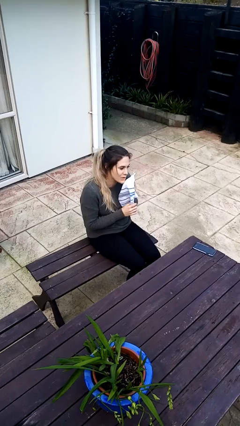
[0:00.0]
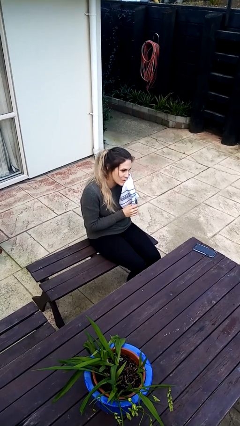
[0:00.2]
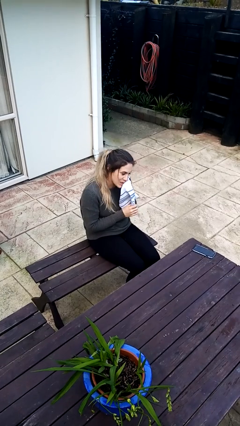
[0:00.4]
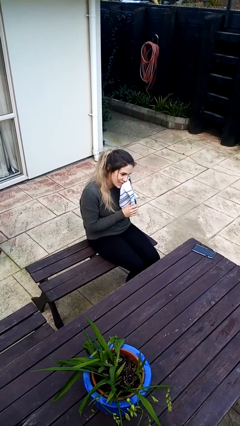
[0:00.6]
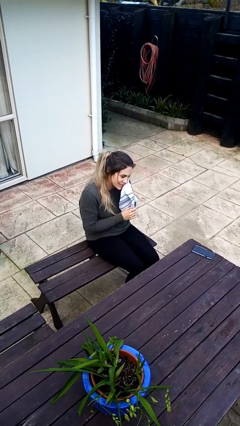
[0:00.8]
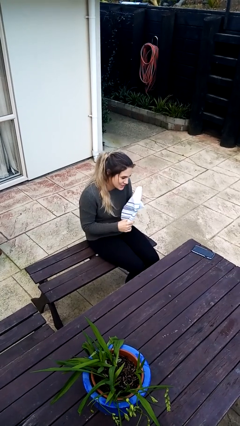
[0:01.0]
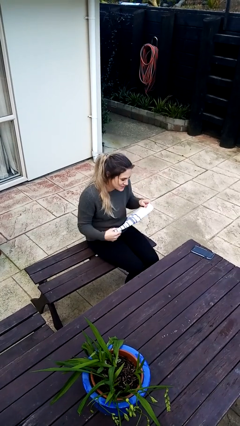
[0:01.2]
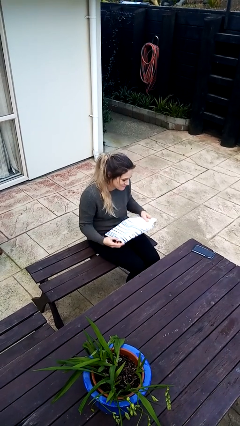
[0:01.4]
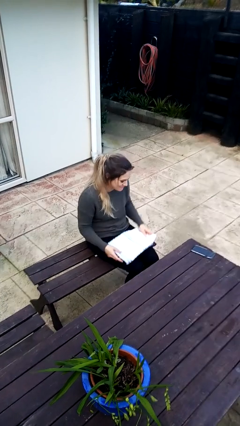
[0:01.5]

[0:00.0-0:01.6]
person wipes mouth with napkin

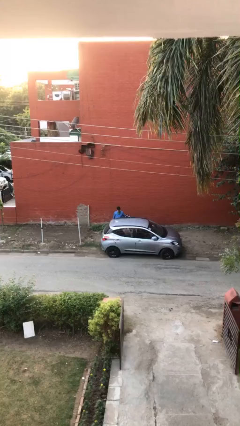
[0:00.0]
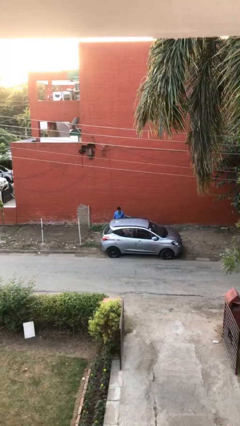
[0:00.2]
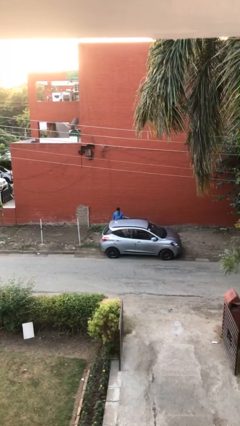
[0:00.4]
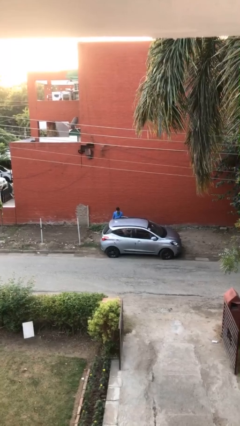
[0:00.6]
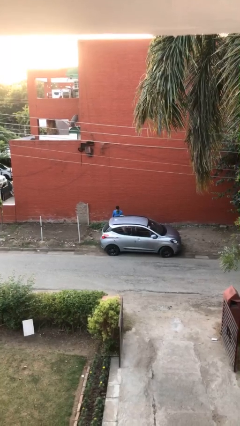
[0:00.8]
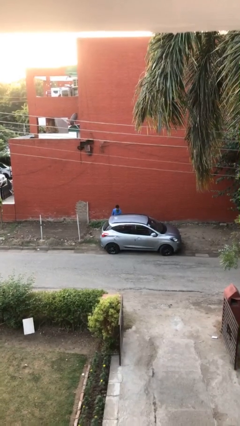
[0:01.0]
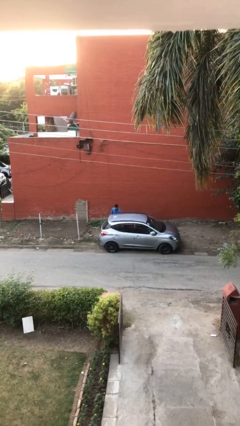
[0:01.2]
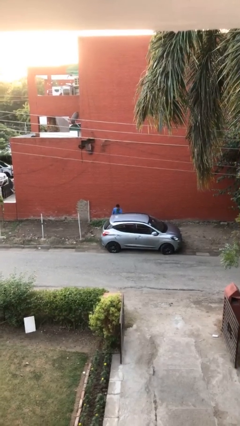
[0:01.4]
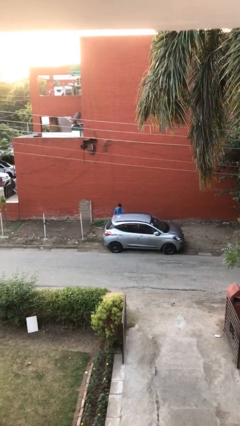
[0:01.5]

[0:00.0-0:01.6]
person closes car door

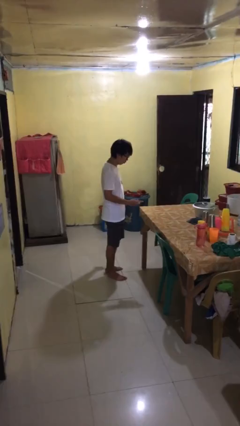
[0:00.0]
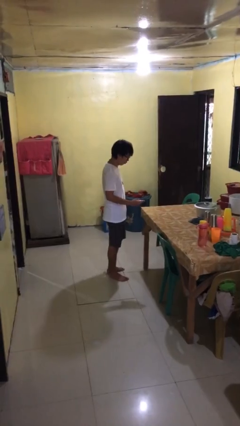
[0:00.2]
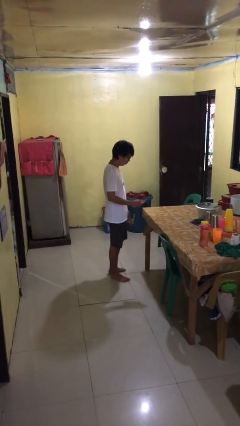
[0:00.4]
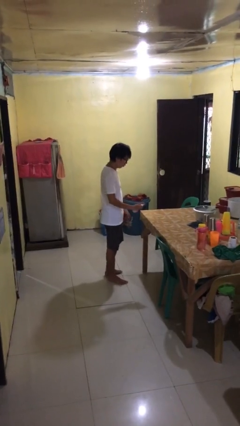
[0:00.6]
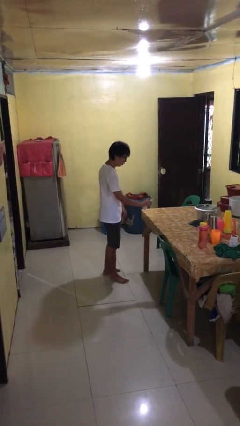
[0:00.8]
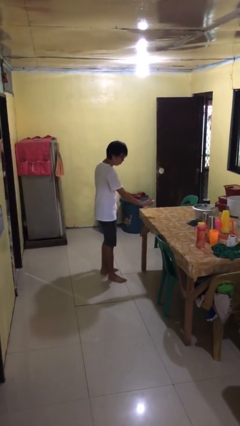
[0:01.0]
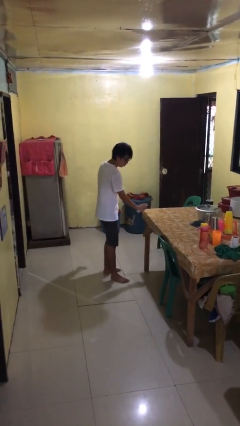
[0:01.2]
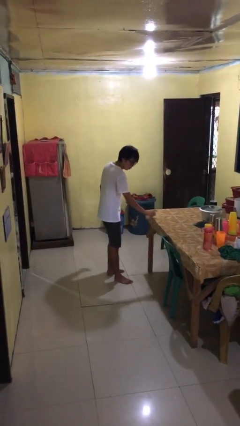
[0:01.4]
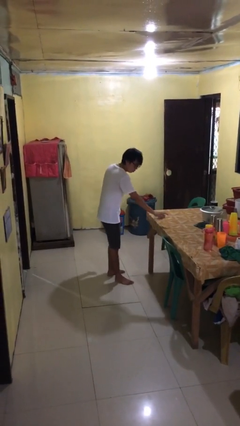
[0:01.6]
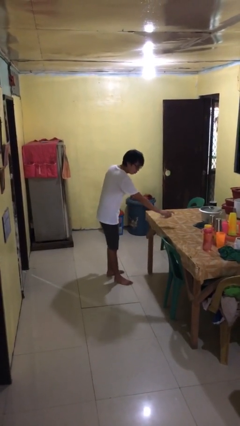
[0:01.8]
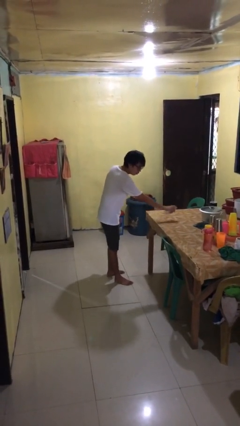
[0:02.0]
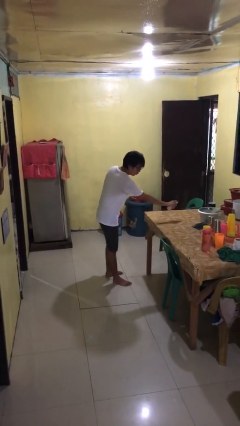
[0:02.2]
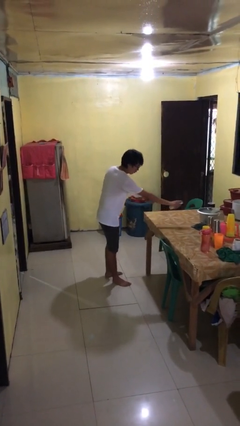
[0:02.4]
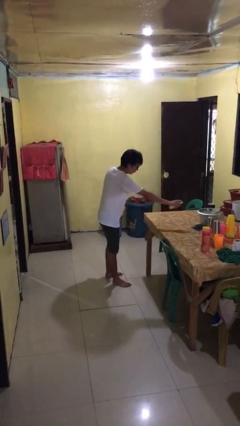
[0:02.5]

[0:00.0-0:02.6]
person sprays from bottle

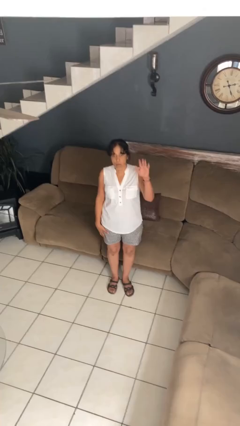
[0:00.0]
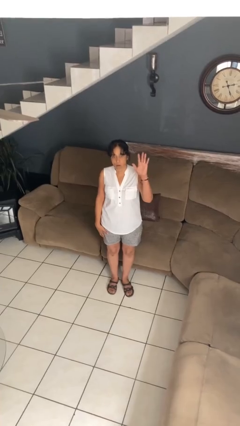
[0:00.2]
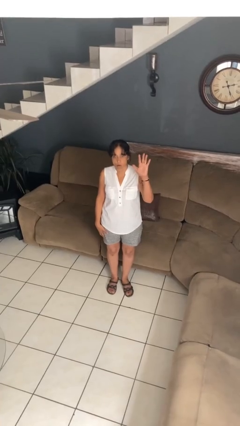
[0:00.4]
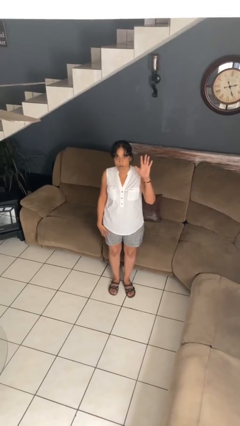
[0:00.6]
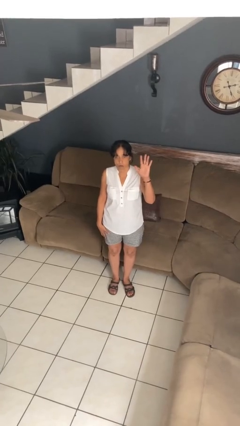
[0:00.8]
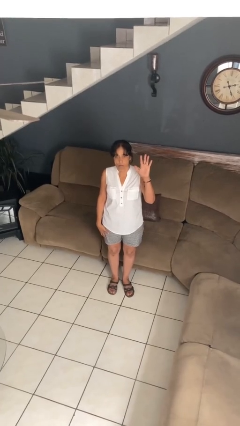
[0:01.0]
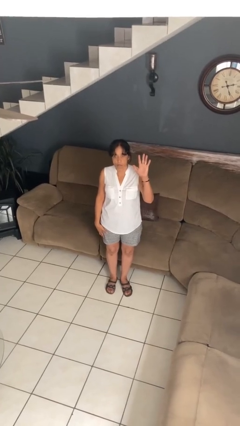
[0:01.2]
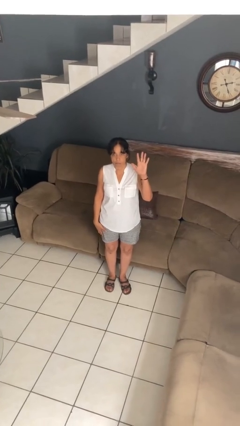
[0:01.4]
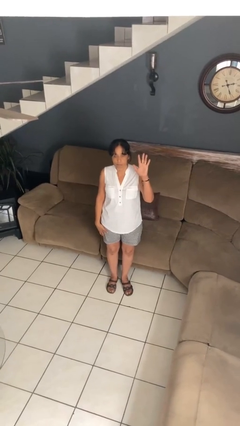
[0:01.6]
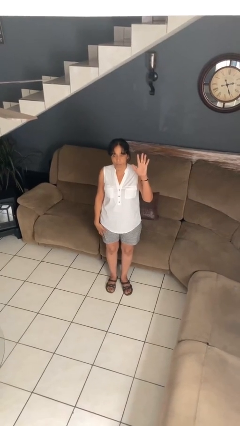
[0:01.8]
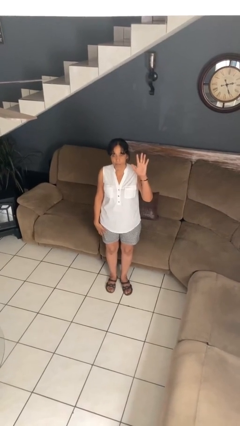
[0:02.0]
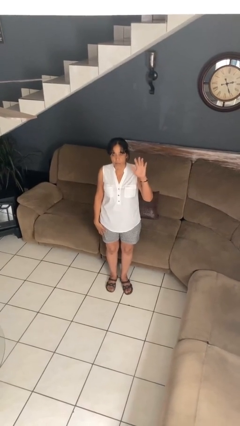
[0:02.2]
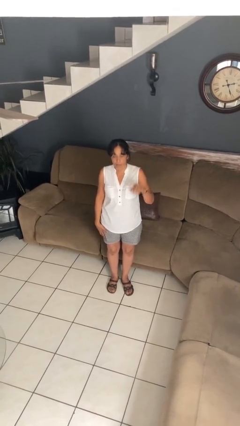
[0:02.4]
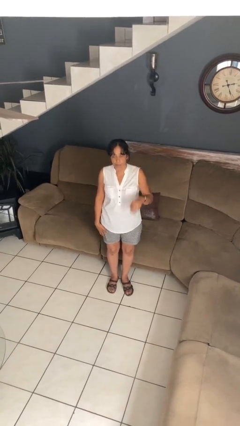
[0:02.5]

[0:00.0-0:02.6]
person gestures number five

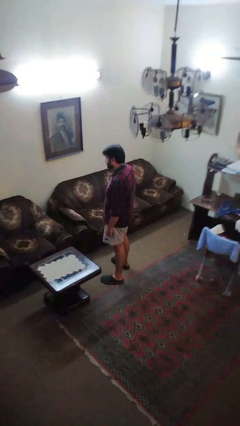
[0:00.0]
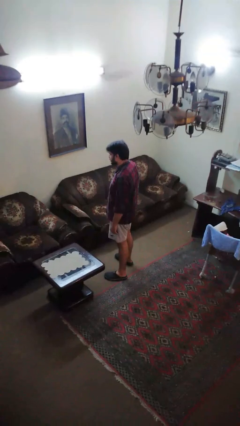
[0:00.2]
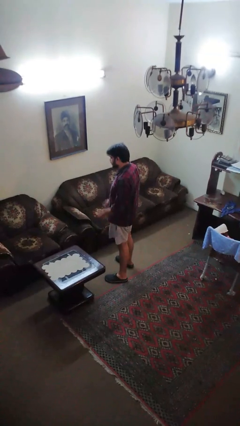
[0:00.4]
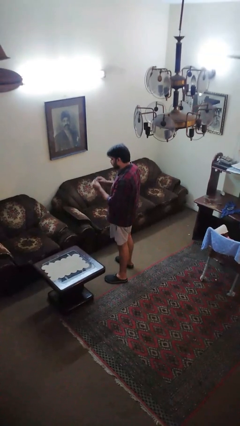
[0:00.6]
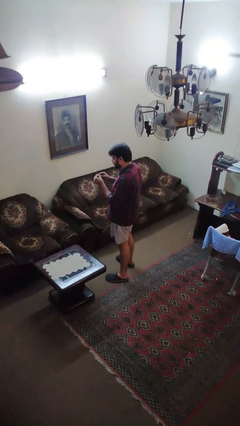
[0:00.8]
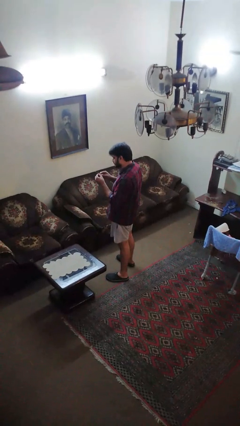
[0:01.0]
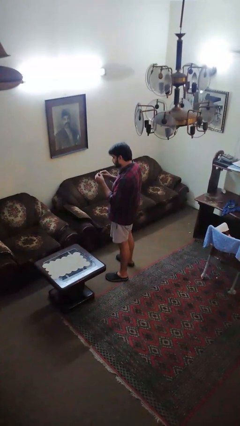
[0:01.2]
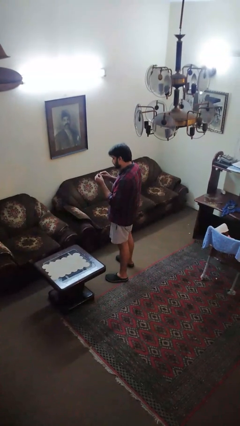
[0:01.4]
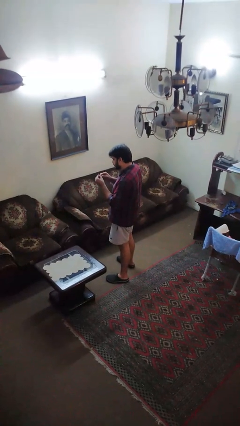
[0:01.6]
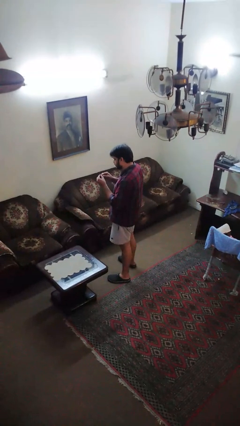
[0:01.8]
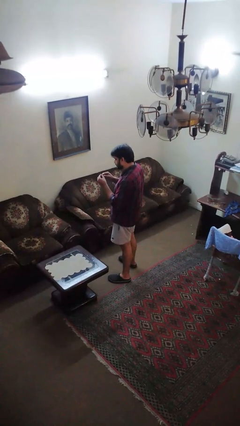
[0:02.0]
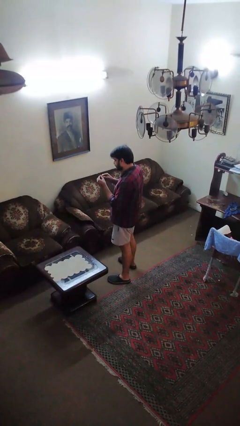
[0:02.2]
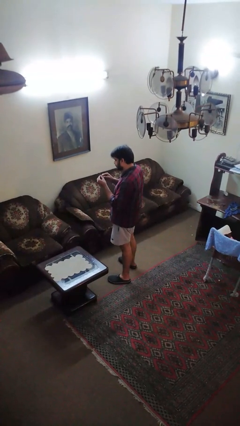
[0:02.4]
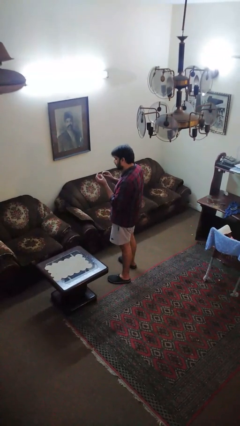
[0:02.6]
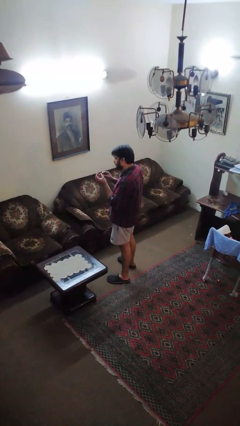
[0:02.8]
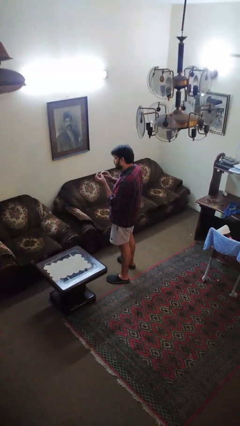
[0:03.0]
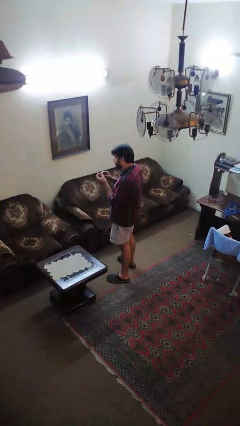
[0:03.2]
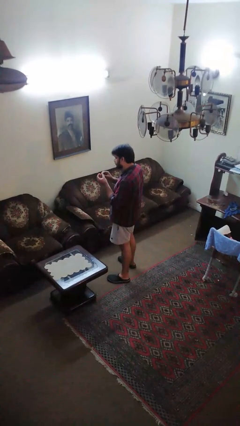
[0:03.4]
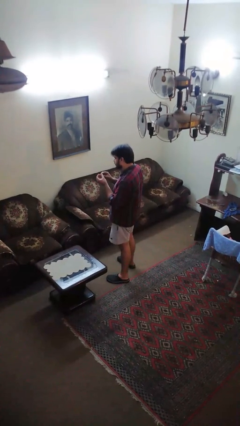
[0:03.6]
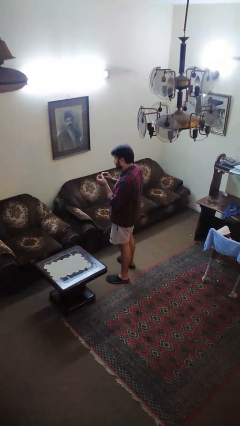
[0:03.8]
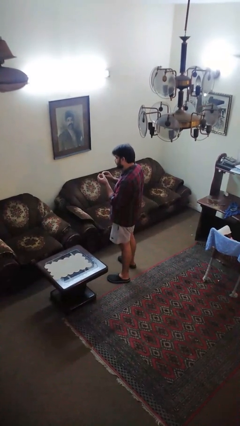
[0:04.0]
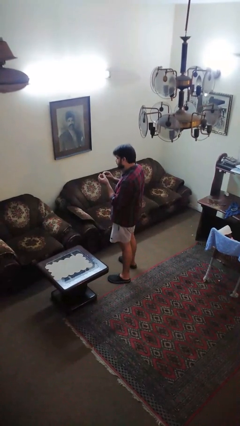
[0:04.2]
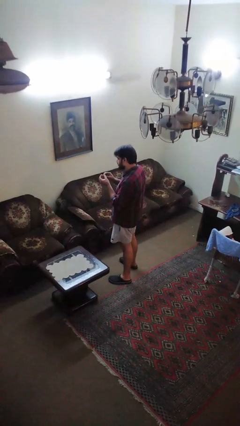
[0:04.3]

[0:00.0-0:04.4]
person files fingernails

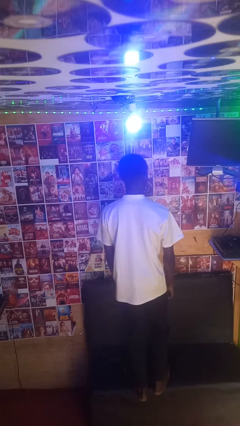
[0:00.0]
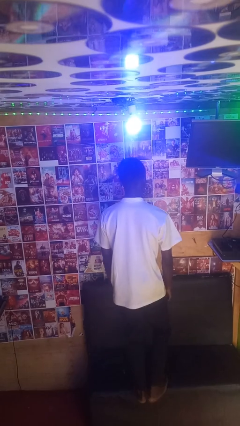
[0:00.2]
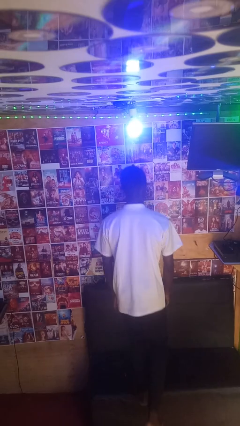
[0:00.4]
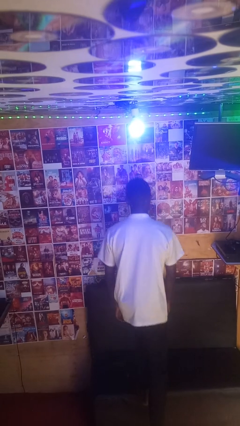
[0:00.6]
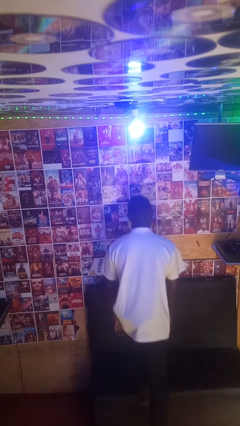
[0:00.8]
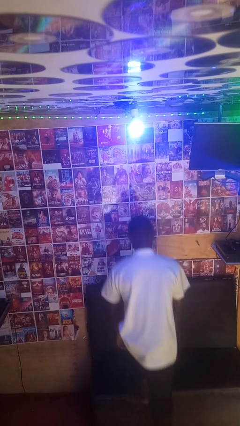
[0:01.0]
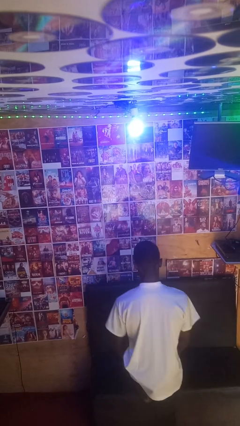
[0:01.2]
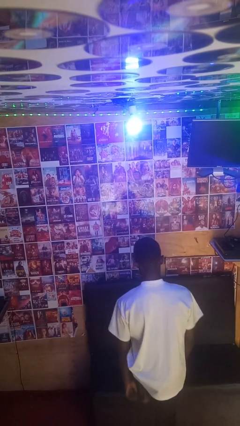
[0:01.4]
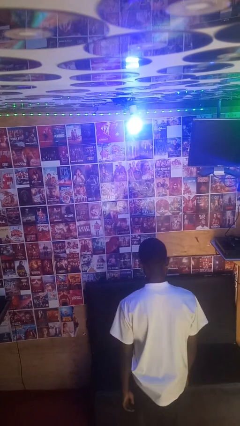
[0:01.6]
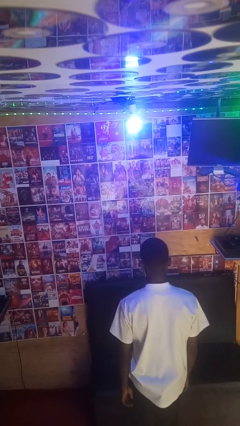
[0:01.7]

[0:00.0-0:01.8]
person climbs off couch

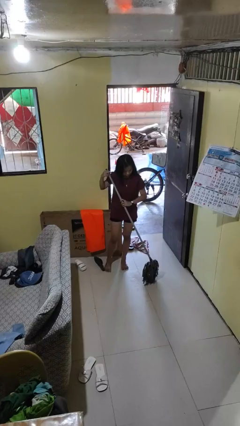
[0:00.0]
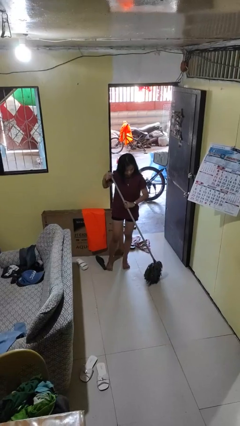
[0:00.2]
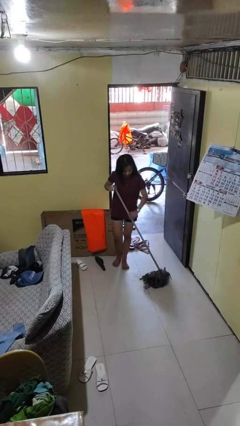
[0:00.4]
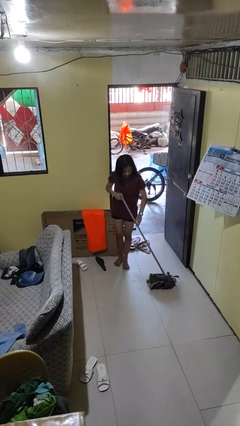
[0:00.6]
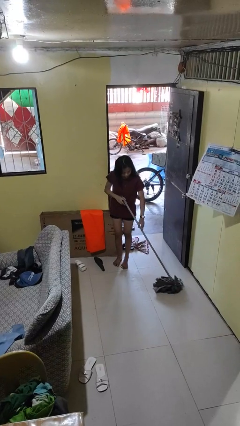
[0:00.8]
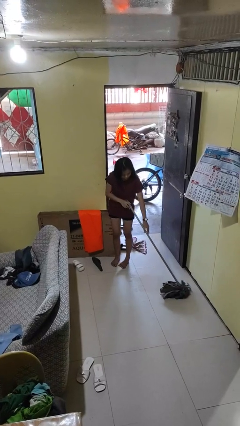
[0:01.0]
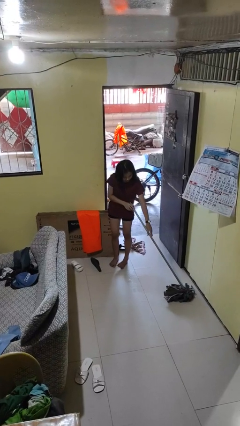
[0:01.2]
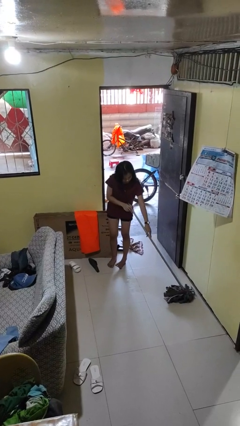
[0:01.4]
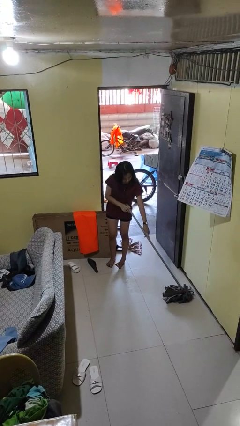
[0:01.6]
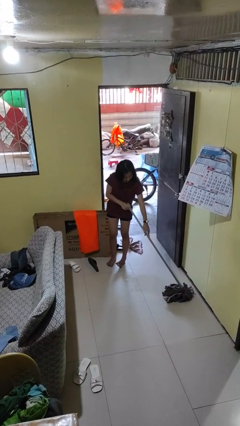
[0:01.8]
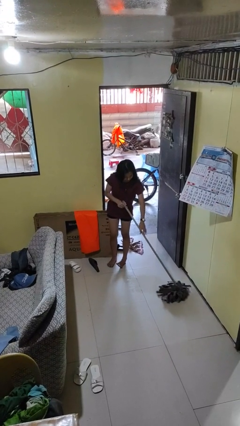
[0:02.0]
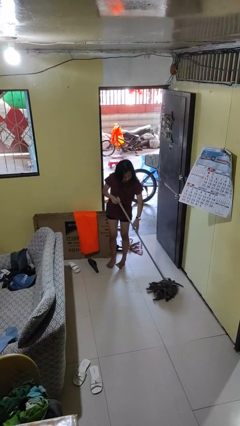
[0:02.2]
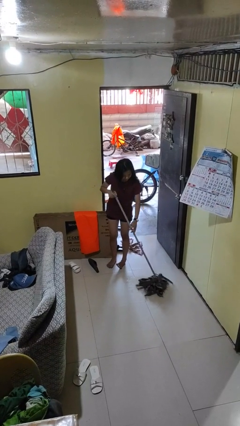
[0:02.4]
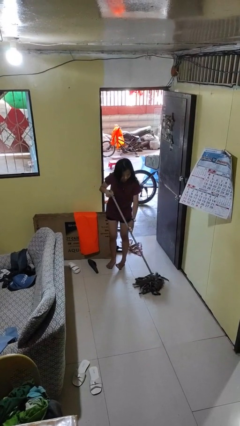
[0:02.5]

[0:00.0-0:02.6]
person mops
